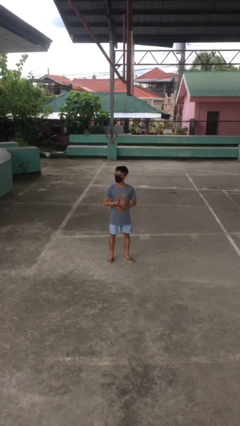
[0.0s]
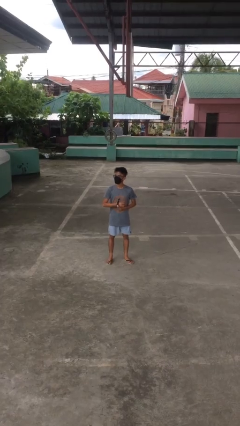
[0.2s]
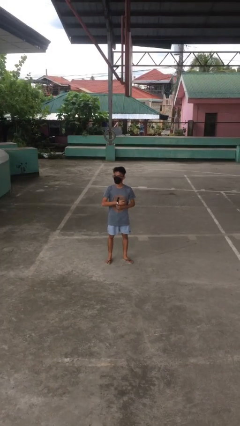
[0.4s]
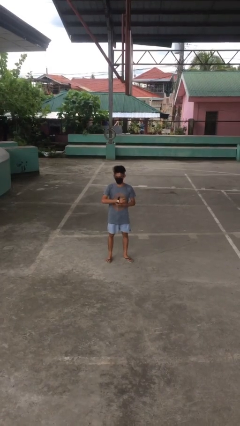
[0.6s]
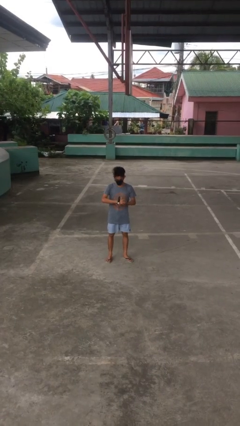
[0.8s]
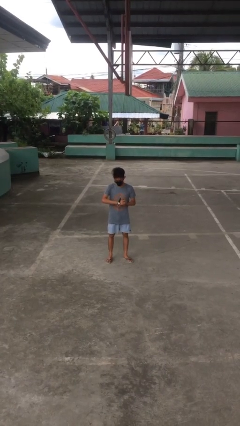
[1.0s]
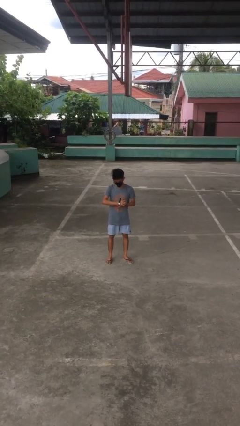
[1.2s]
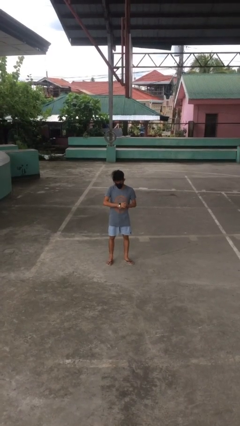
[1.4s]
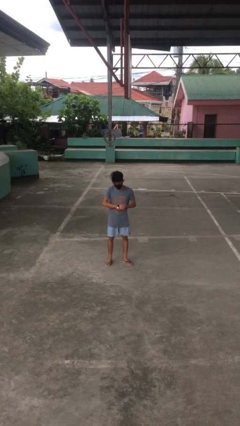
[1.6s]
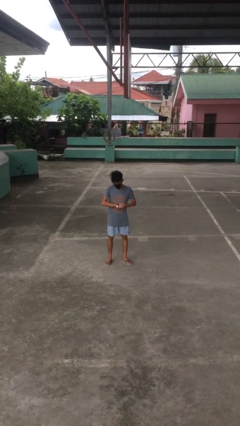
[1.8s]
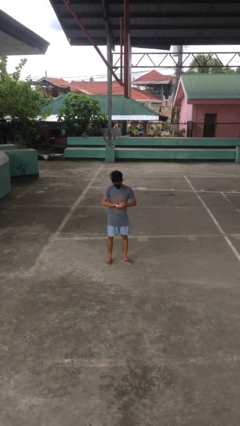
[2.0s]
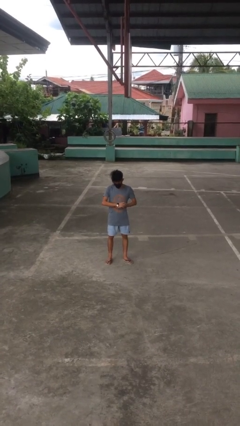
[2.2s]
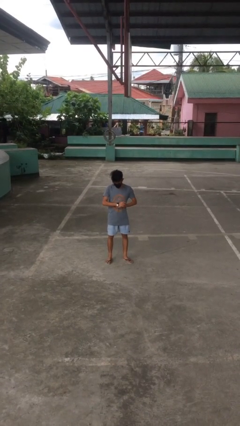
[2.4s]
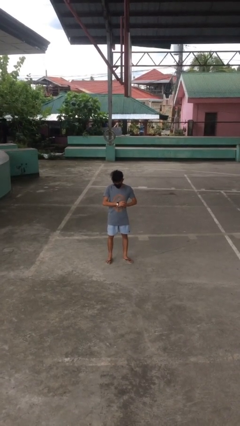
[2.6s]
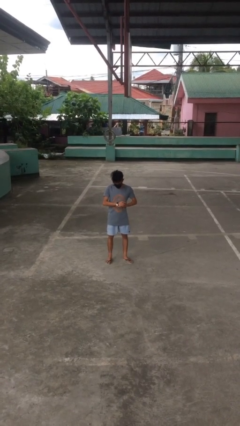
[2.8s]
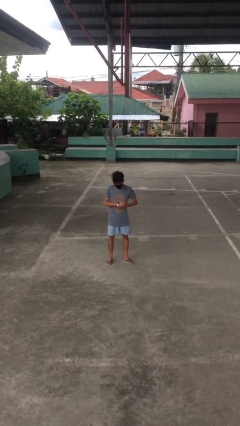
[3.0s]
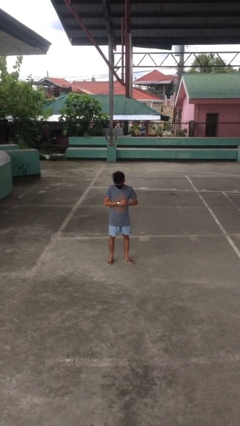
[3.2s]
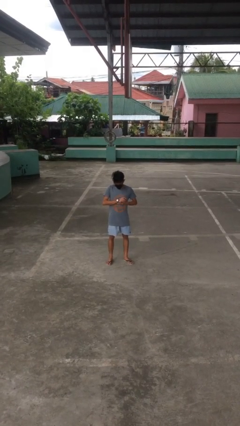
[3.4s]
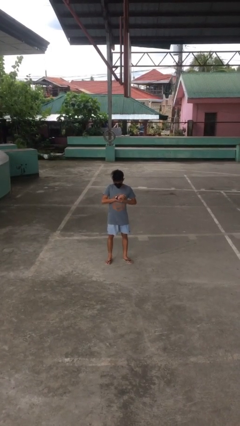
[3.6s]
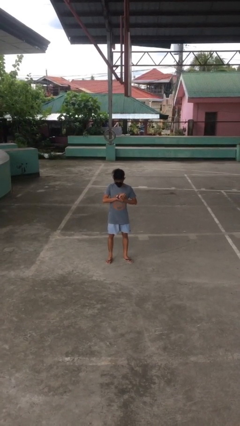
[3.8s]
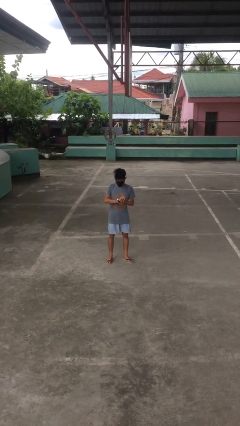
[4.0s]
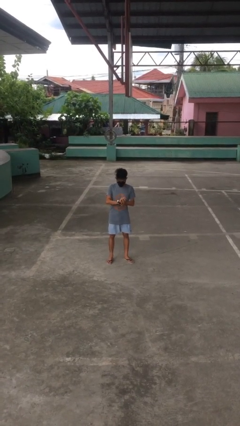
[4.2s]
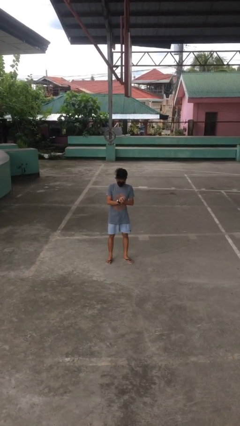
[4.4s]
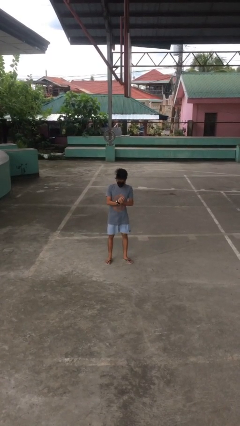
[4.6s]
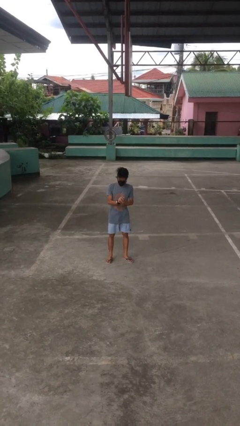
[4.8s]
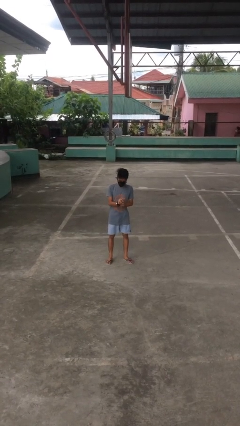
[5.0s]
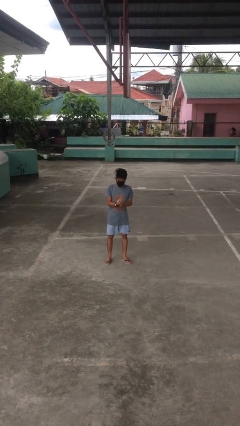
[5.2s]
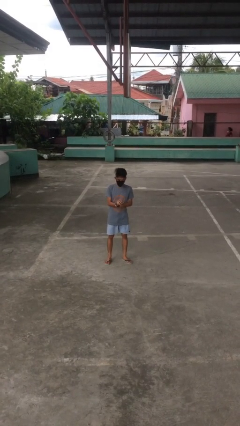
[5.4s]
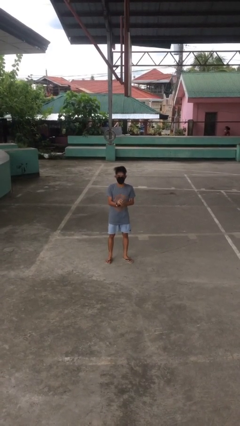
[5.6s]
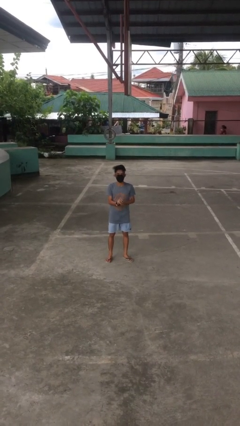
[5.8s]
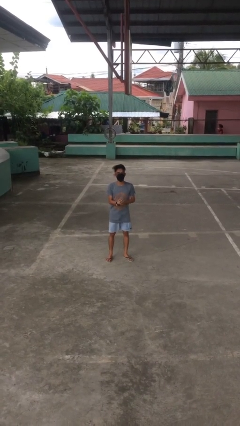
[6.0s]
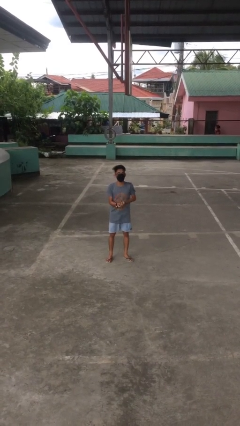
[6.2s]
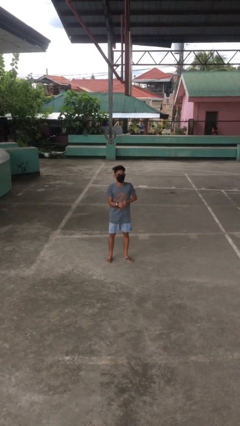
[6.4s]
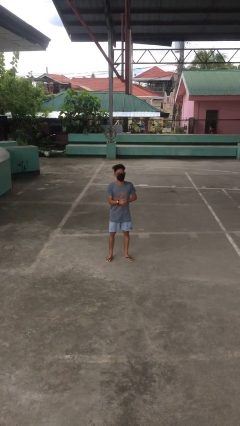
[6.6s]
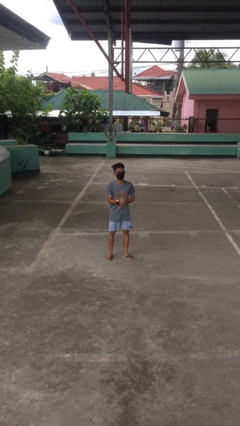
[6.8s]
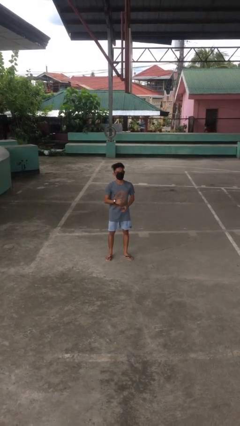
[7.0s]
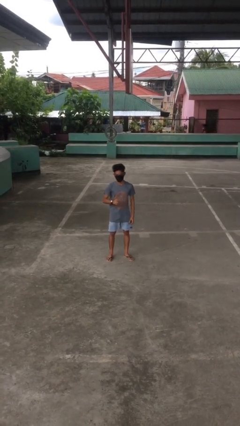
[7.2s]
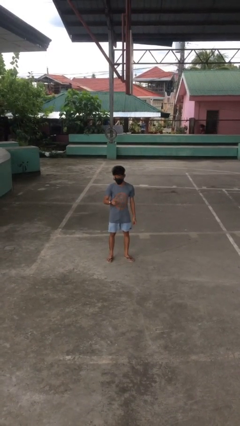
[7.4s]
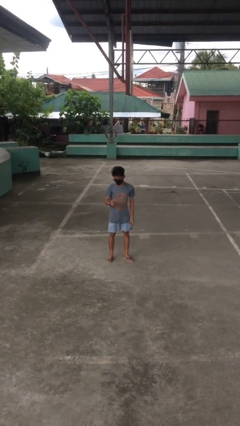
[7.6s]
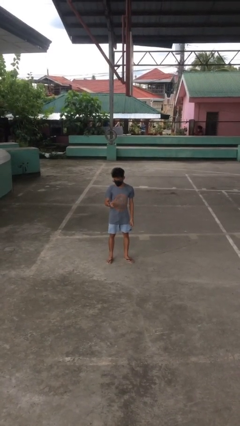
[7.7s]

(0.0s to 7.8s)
person puts on wristwatch

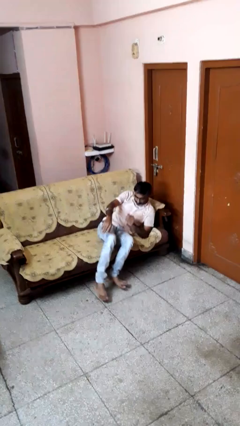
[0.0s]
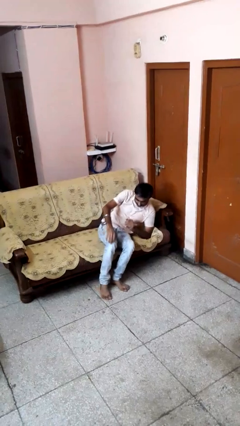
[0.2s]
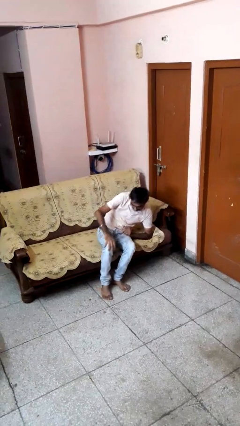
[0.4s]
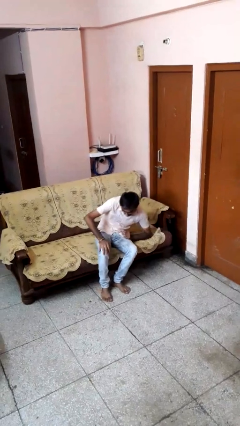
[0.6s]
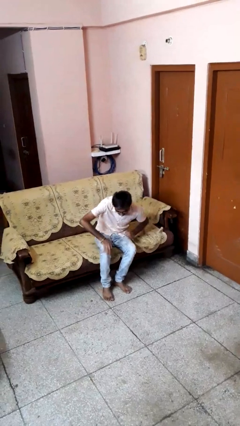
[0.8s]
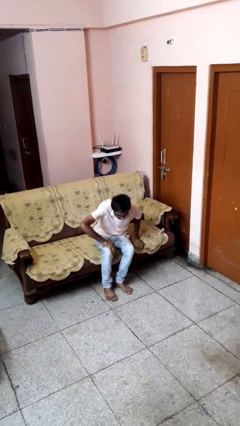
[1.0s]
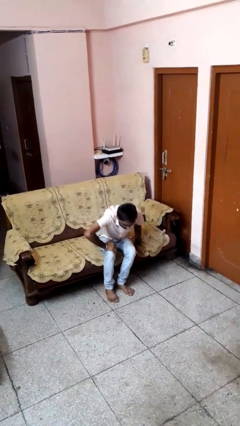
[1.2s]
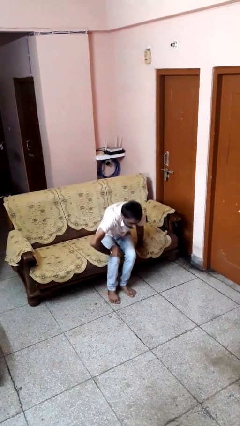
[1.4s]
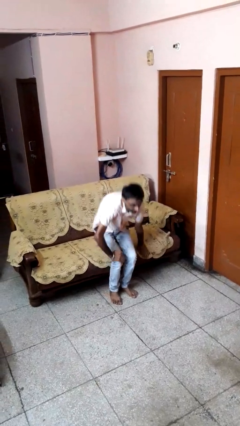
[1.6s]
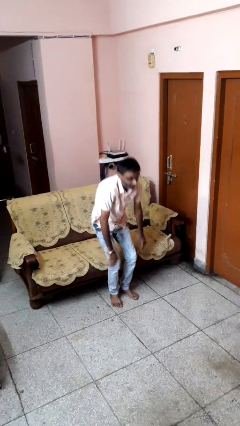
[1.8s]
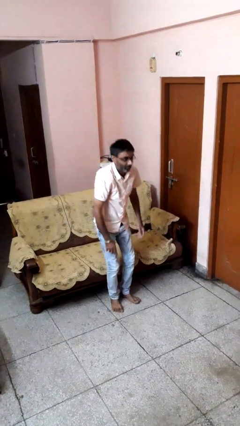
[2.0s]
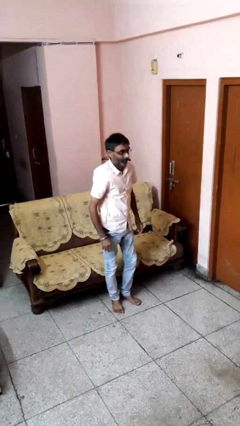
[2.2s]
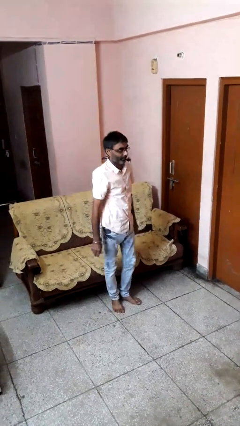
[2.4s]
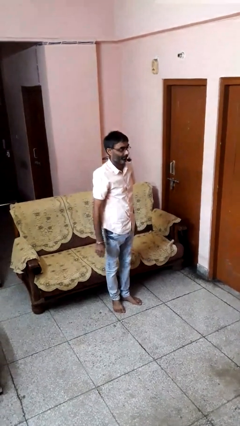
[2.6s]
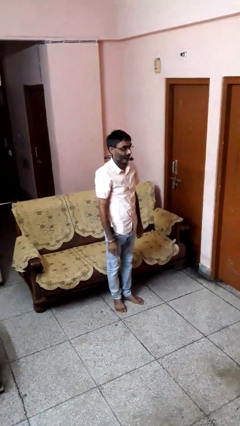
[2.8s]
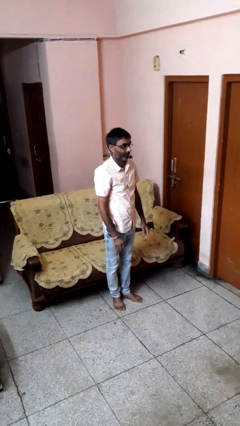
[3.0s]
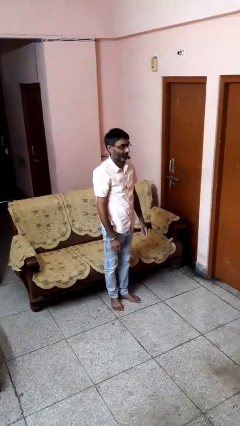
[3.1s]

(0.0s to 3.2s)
person stands up

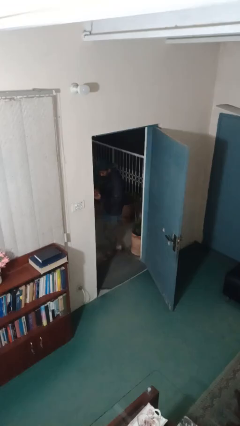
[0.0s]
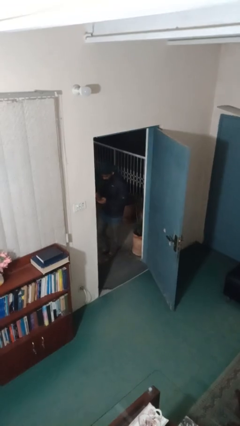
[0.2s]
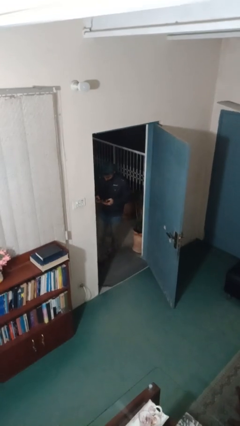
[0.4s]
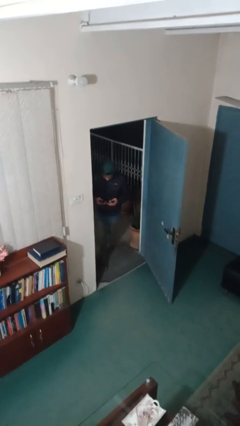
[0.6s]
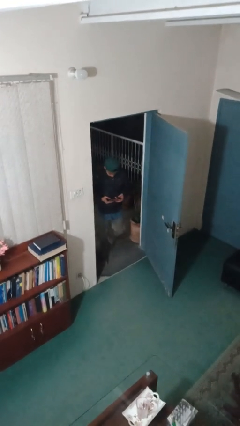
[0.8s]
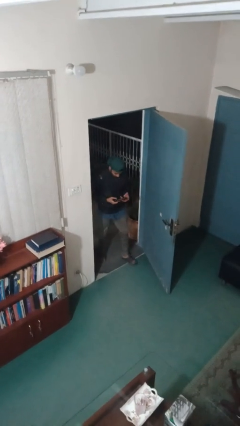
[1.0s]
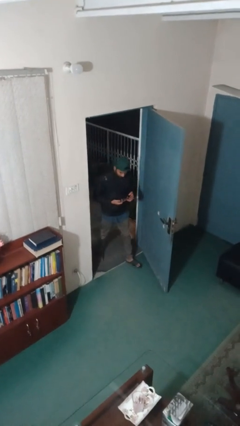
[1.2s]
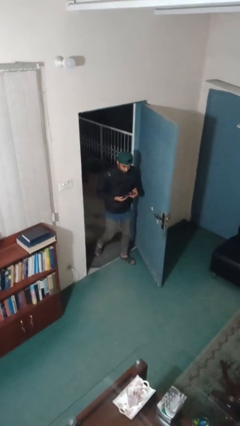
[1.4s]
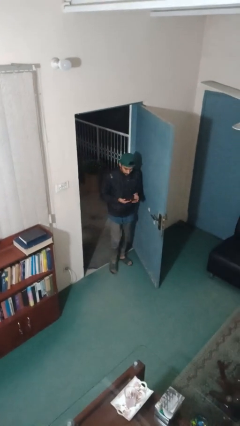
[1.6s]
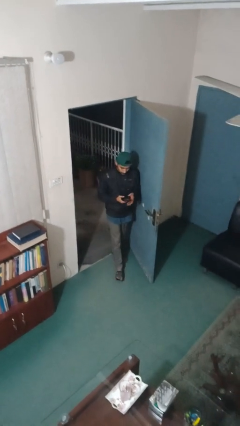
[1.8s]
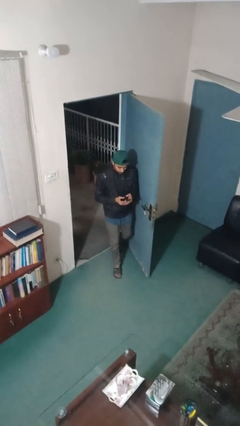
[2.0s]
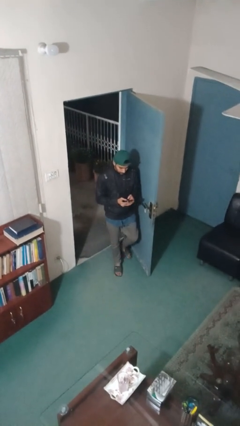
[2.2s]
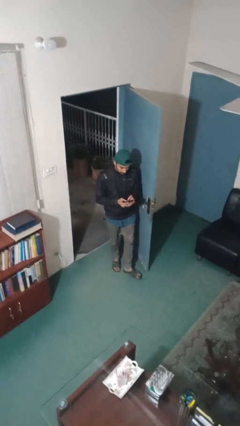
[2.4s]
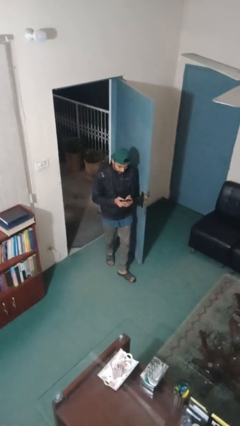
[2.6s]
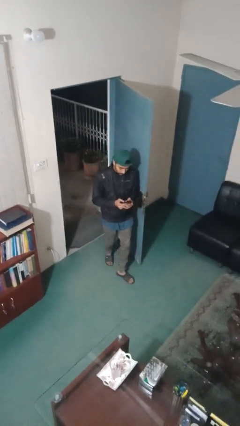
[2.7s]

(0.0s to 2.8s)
person enters scene through structure

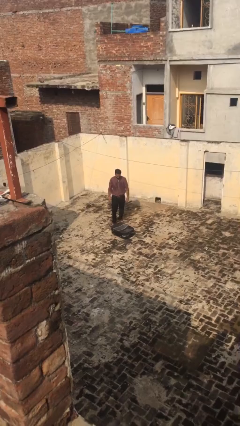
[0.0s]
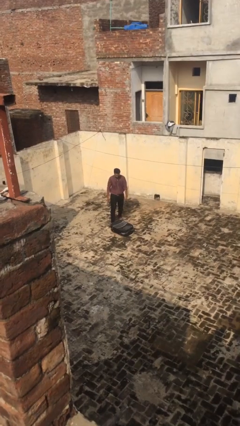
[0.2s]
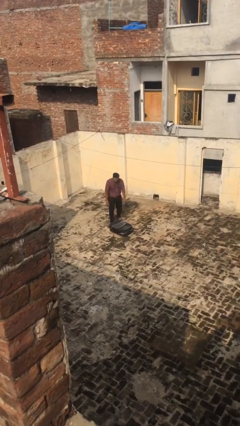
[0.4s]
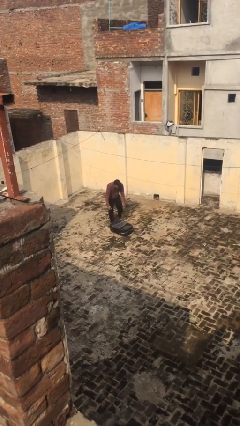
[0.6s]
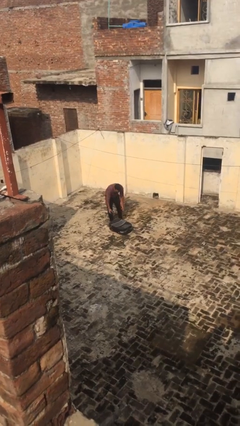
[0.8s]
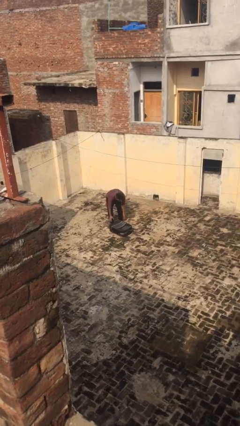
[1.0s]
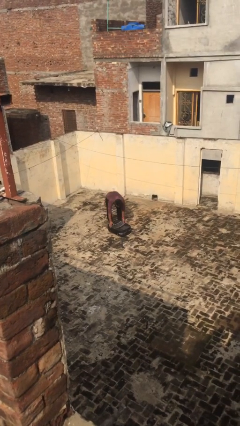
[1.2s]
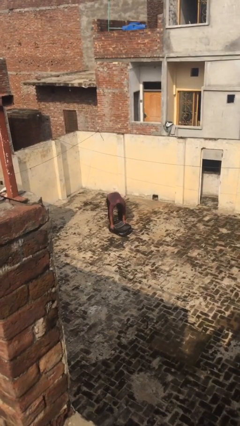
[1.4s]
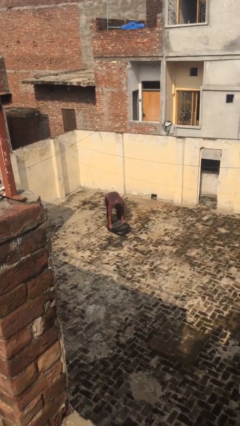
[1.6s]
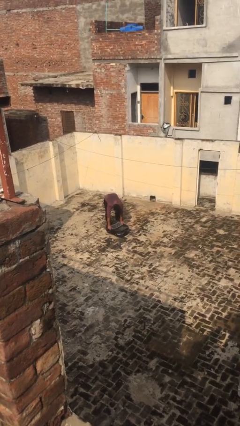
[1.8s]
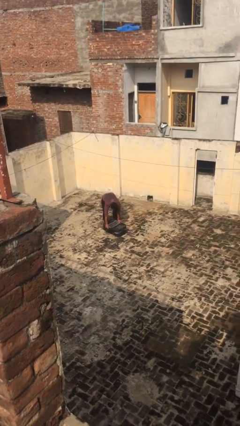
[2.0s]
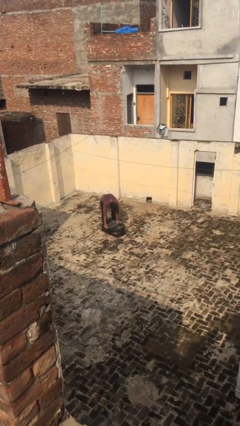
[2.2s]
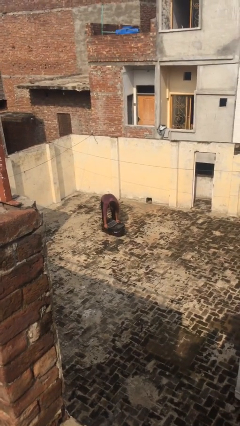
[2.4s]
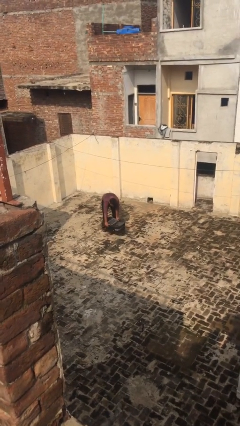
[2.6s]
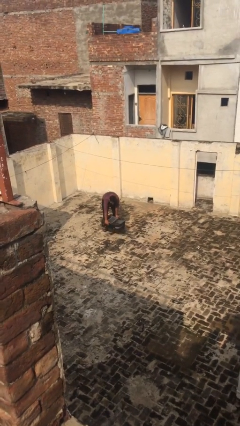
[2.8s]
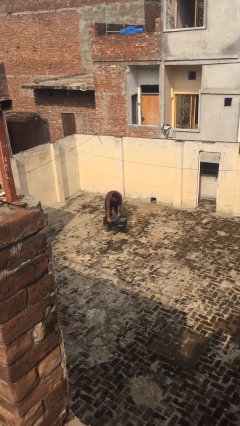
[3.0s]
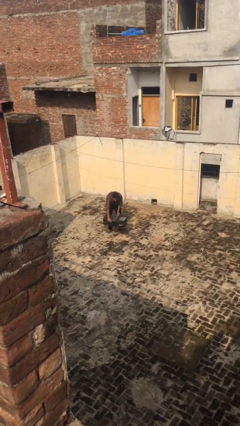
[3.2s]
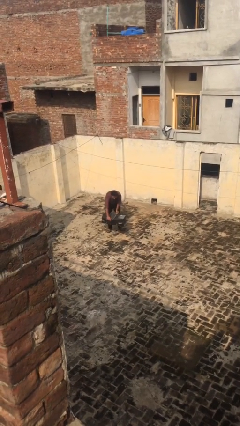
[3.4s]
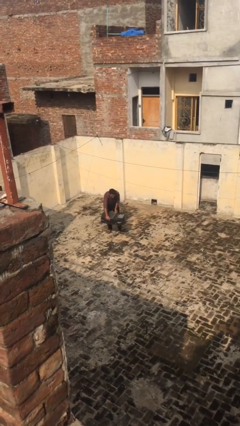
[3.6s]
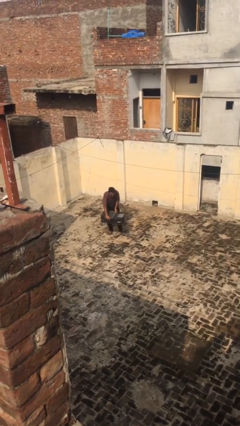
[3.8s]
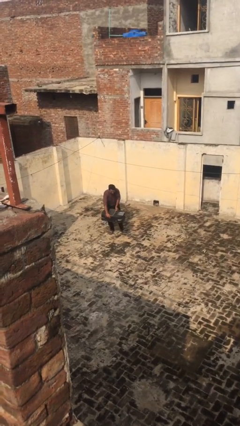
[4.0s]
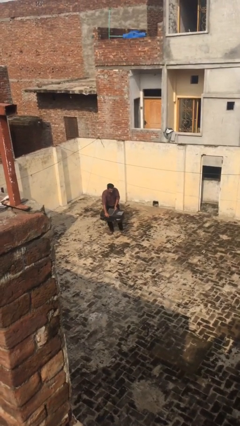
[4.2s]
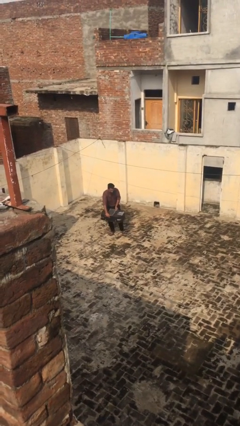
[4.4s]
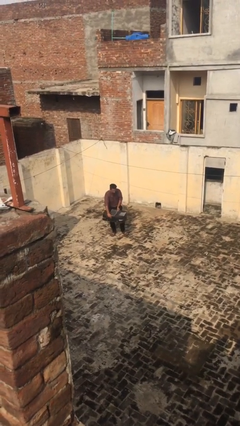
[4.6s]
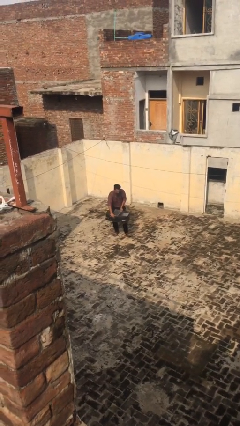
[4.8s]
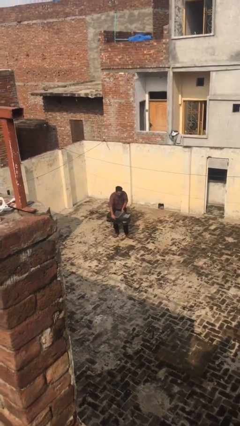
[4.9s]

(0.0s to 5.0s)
person picks up object from floor
